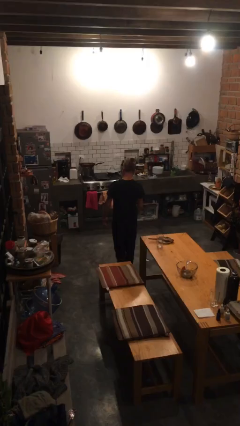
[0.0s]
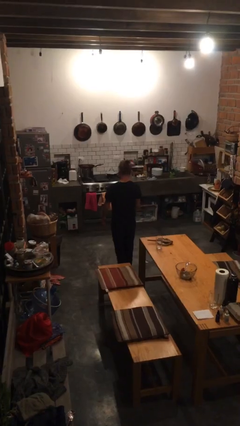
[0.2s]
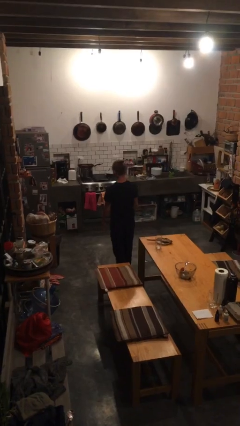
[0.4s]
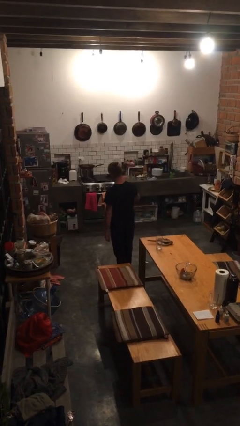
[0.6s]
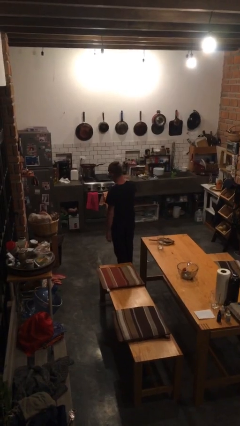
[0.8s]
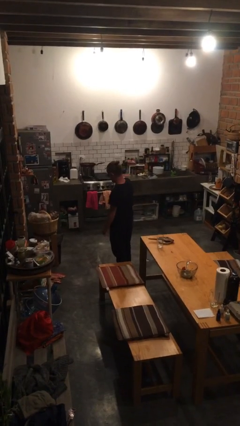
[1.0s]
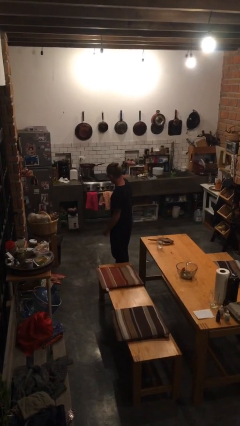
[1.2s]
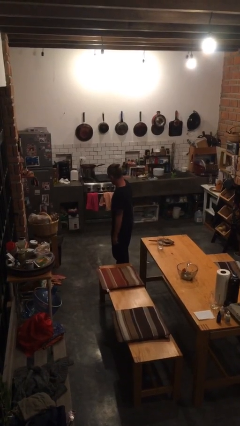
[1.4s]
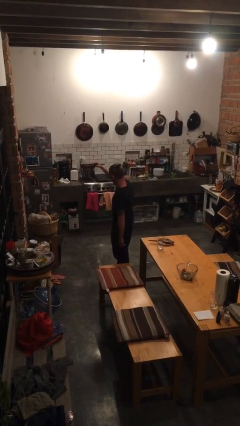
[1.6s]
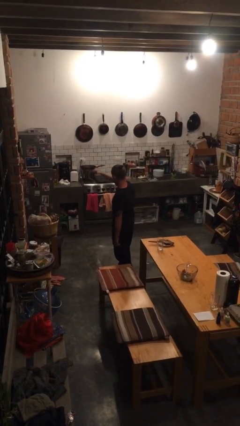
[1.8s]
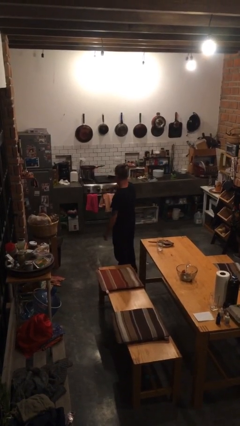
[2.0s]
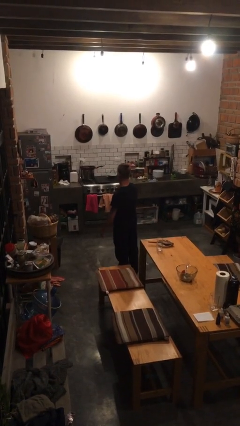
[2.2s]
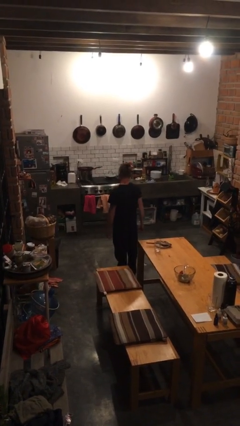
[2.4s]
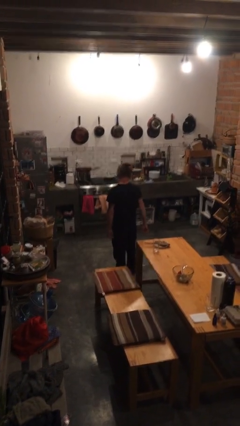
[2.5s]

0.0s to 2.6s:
person salutes

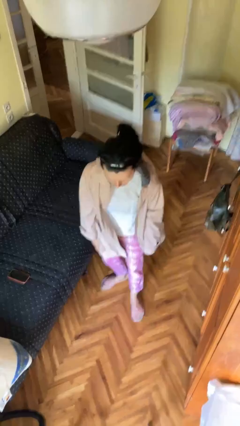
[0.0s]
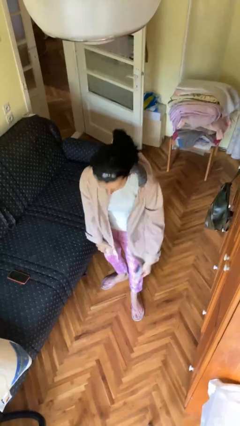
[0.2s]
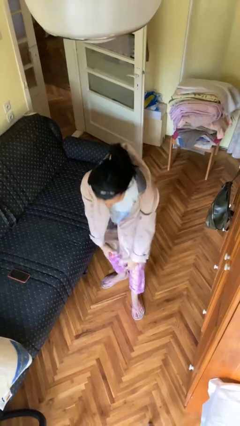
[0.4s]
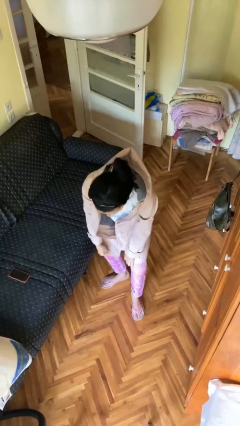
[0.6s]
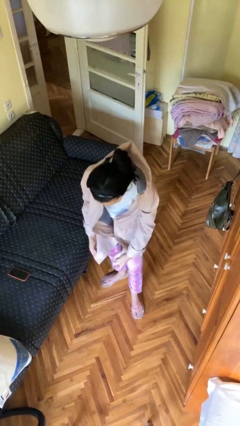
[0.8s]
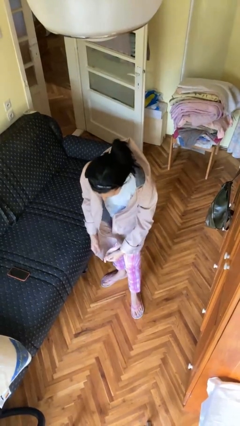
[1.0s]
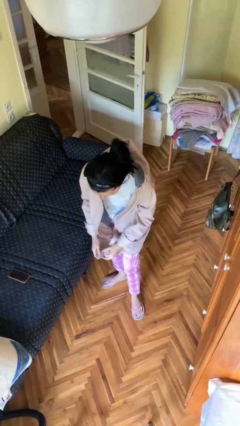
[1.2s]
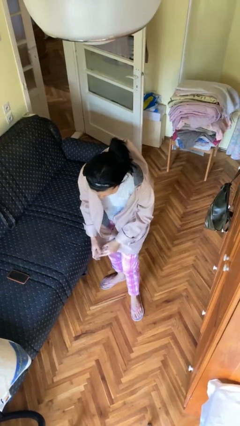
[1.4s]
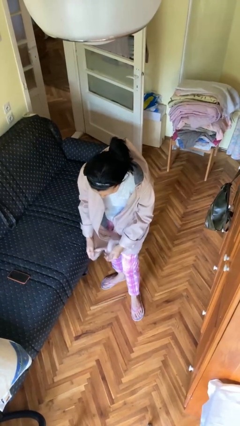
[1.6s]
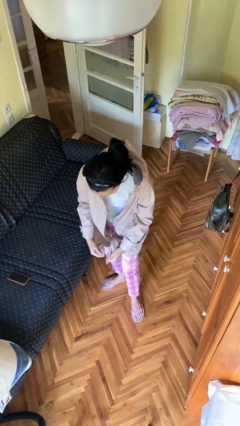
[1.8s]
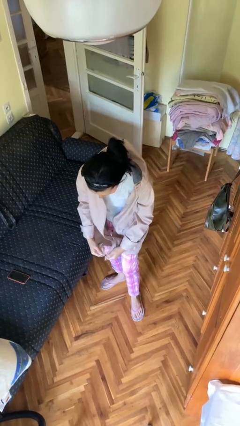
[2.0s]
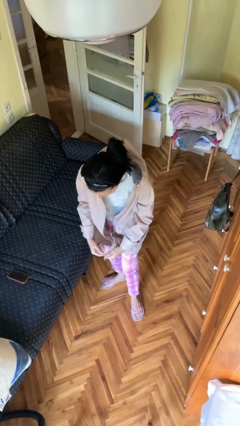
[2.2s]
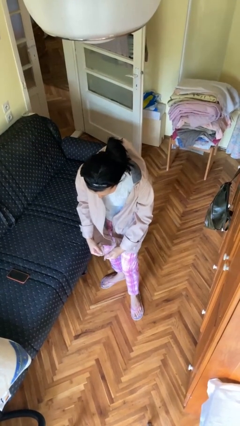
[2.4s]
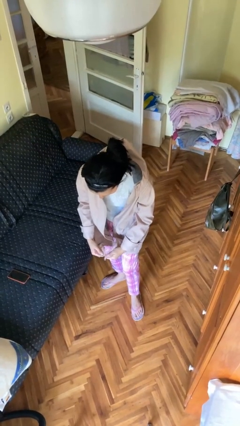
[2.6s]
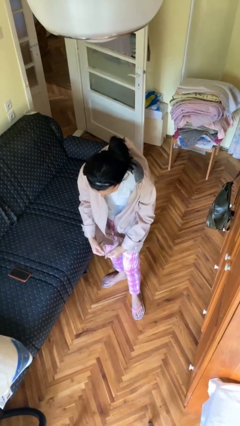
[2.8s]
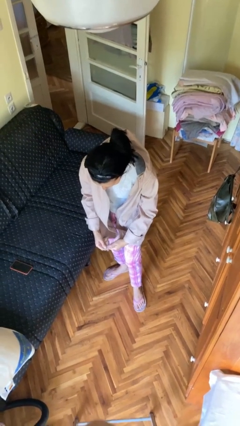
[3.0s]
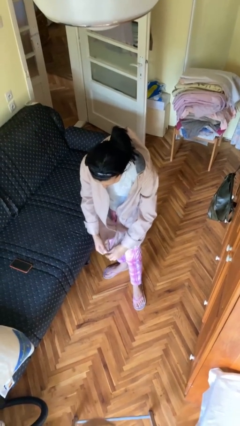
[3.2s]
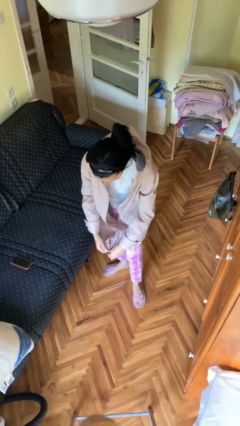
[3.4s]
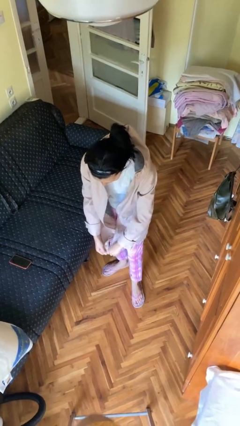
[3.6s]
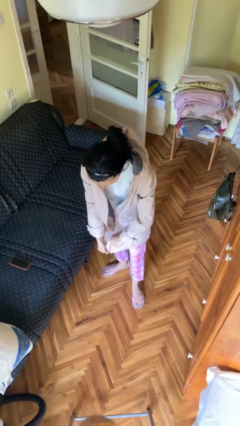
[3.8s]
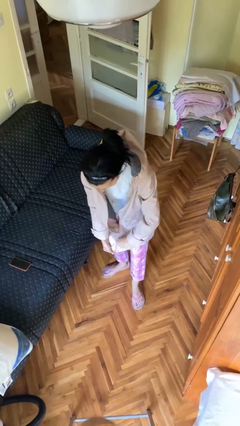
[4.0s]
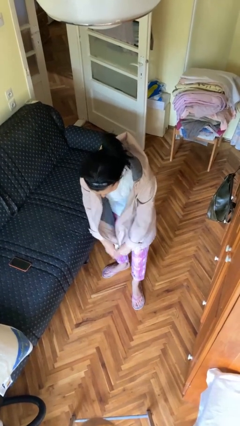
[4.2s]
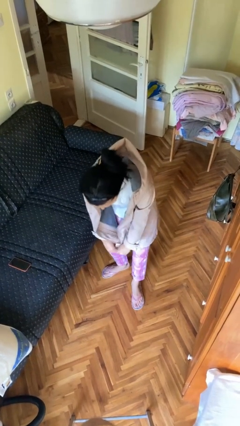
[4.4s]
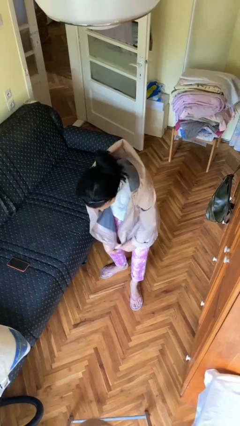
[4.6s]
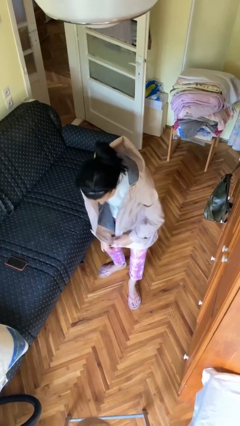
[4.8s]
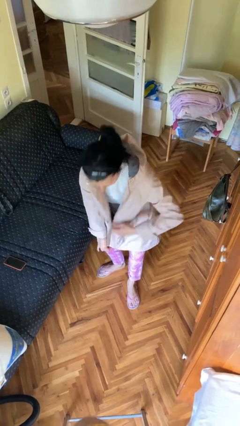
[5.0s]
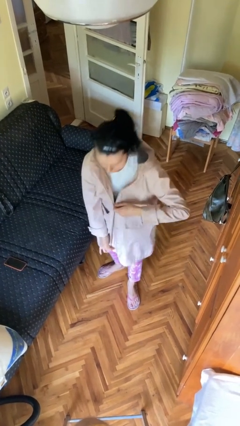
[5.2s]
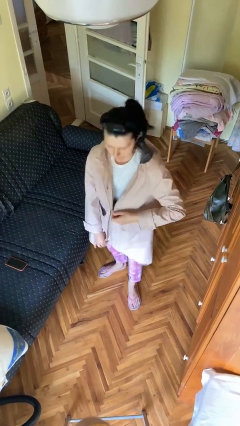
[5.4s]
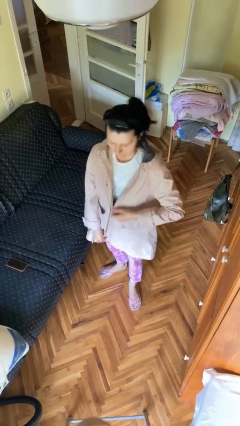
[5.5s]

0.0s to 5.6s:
person zips up jacket

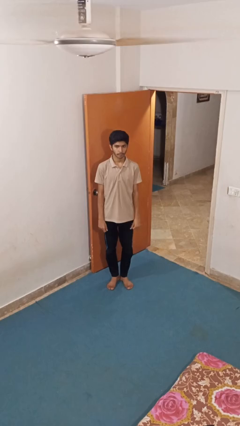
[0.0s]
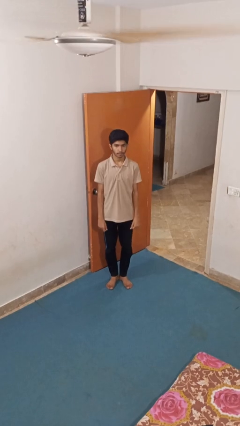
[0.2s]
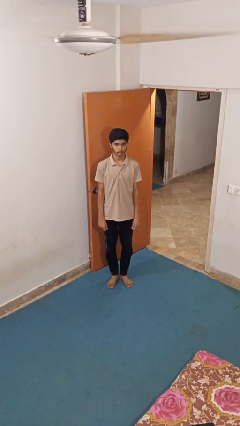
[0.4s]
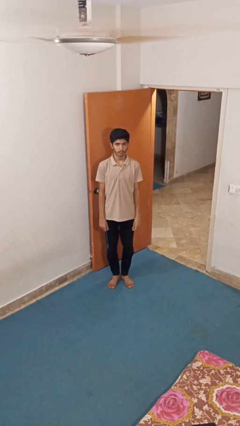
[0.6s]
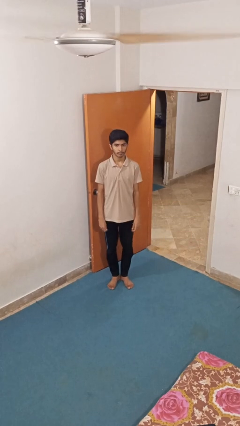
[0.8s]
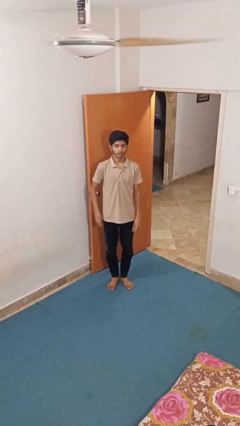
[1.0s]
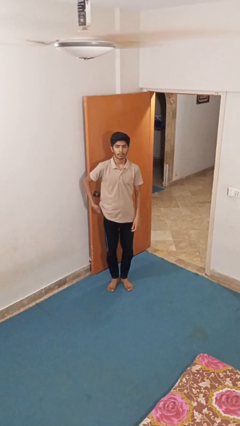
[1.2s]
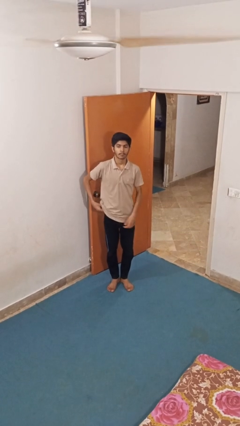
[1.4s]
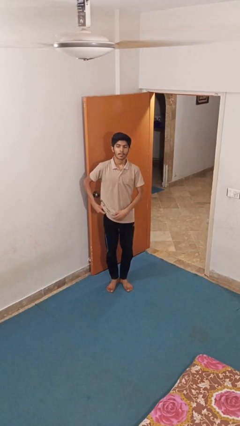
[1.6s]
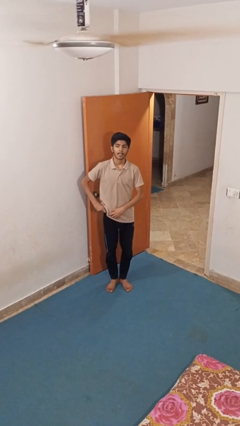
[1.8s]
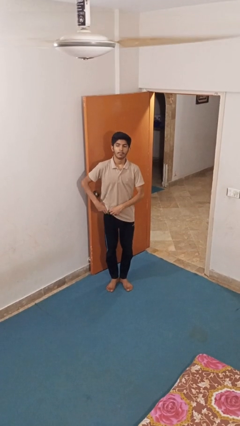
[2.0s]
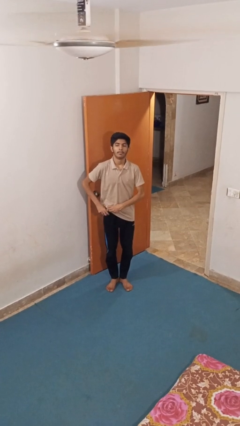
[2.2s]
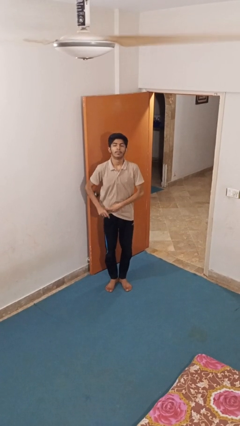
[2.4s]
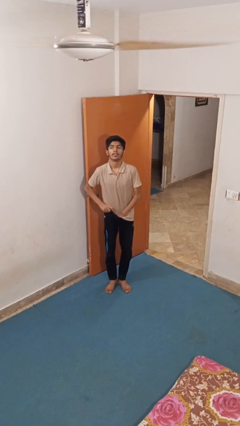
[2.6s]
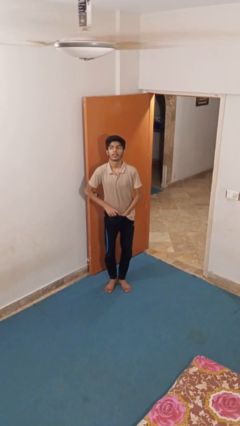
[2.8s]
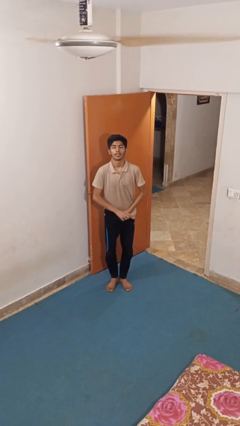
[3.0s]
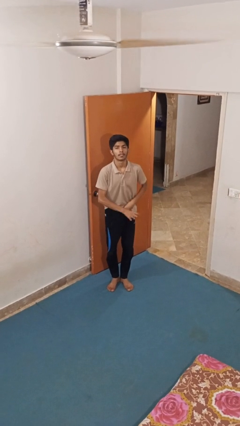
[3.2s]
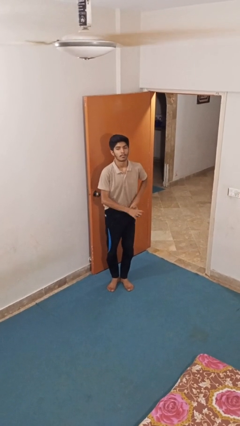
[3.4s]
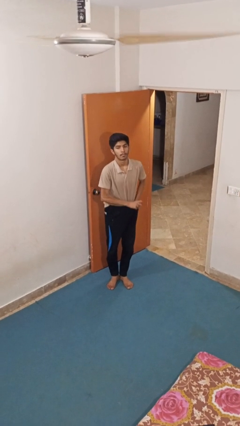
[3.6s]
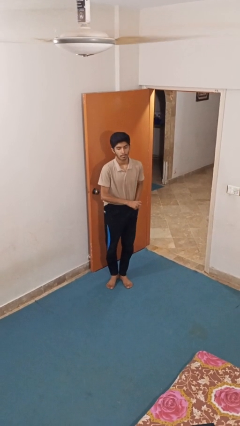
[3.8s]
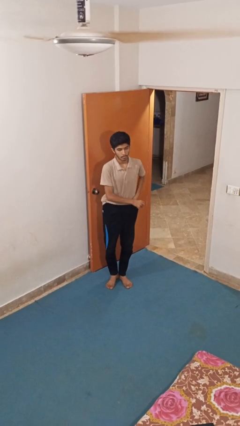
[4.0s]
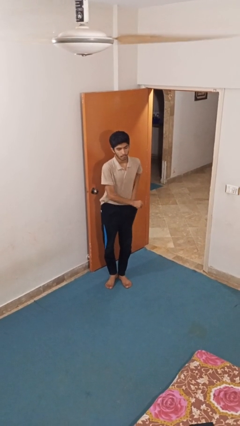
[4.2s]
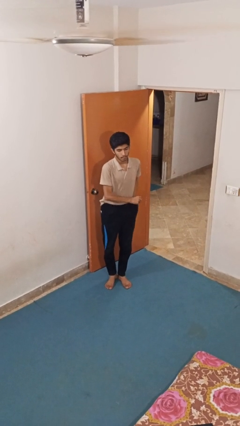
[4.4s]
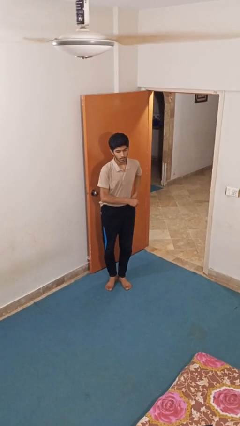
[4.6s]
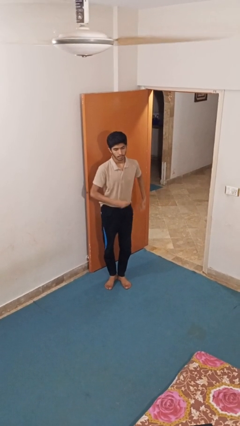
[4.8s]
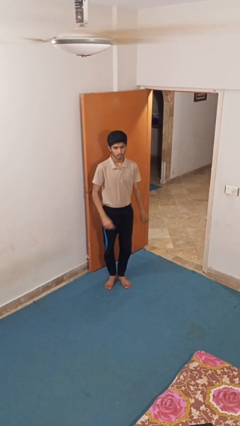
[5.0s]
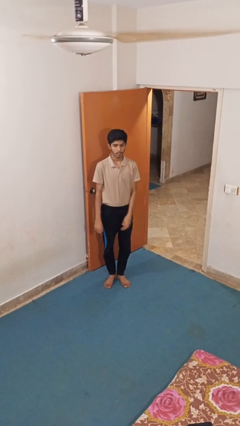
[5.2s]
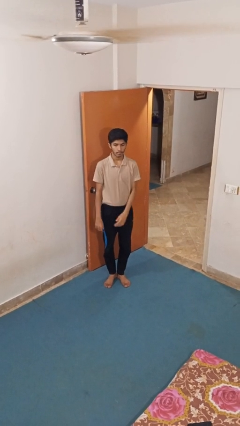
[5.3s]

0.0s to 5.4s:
person tucks in shirt

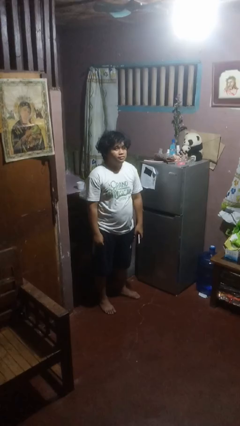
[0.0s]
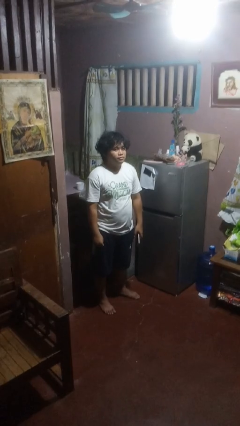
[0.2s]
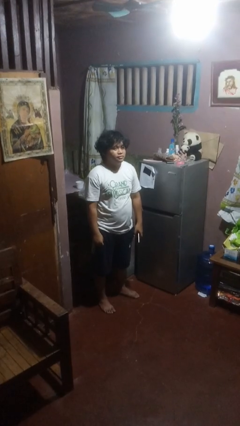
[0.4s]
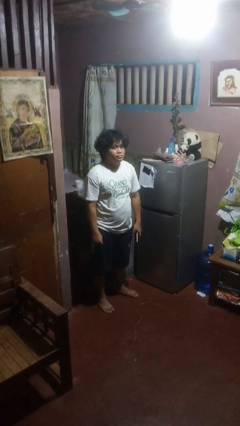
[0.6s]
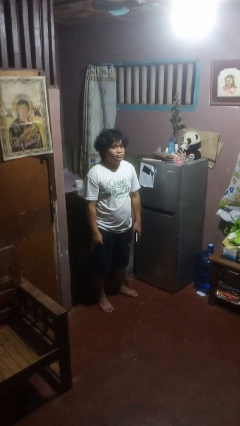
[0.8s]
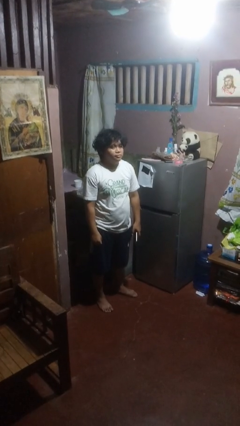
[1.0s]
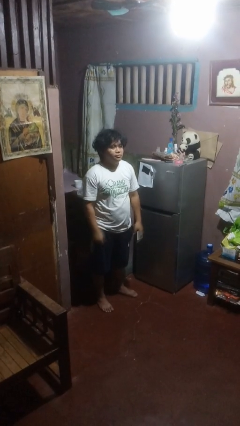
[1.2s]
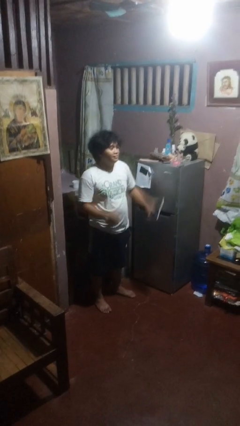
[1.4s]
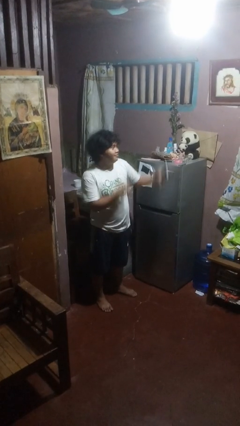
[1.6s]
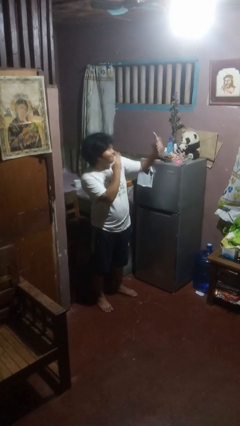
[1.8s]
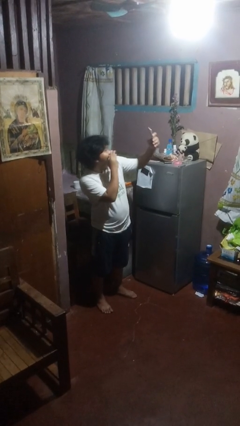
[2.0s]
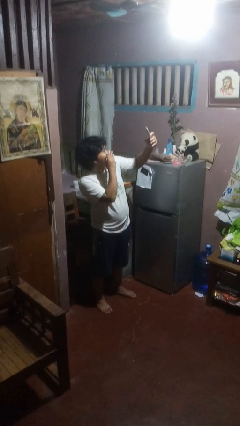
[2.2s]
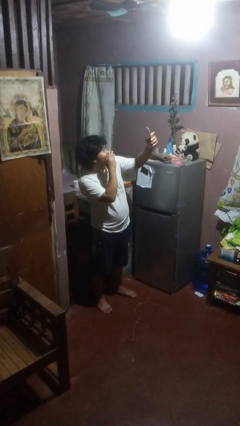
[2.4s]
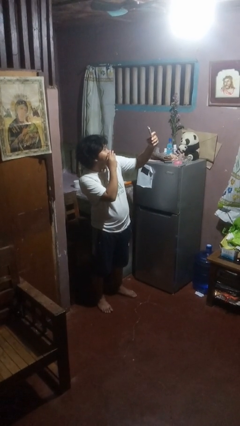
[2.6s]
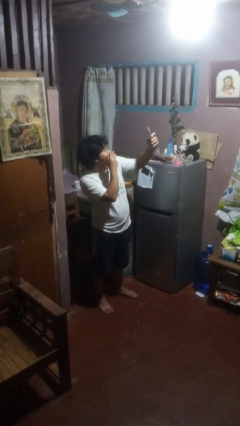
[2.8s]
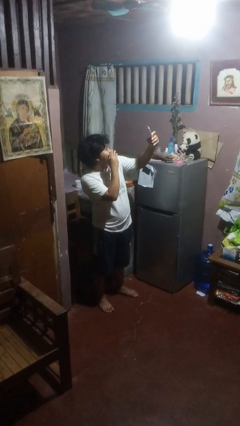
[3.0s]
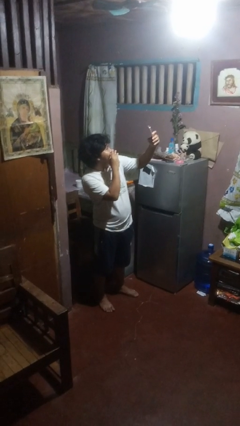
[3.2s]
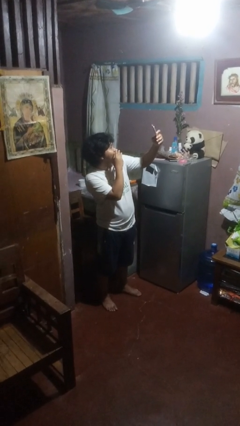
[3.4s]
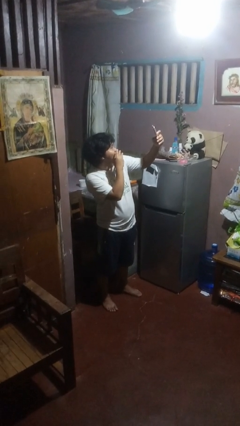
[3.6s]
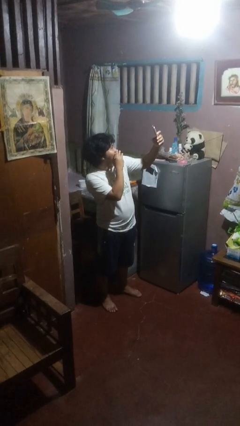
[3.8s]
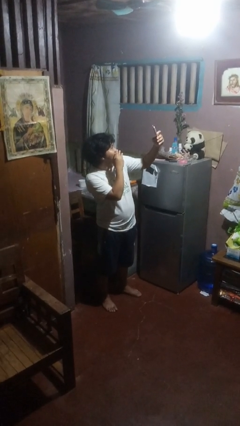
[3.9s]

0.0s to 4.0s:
person takes selfie

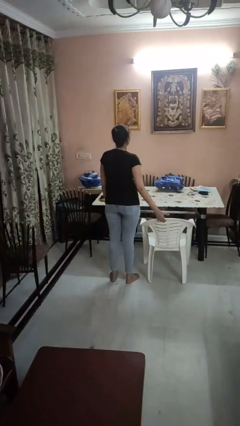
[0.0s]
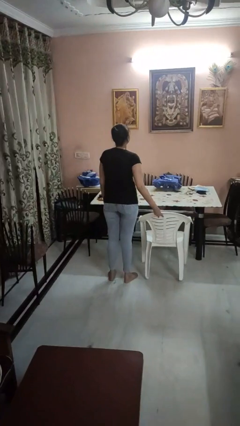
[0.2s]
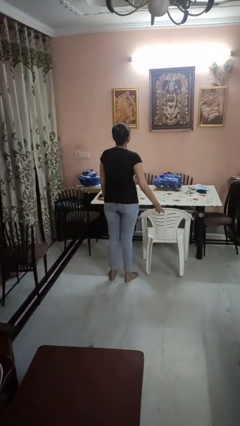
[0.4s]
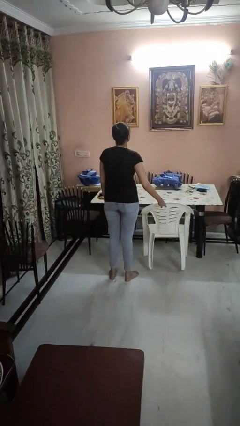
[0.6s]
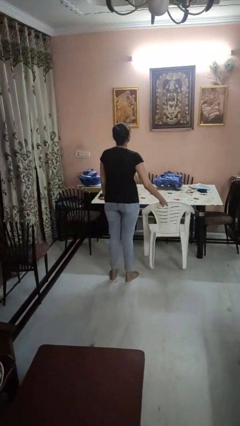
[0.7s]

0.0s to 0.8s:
person pushes in chair
